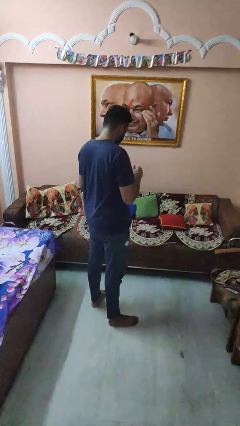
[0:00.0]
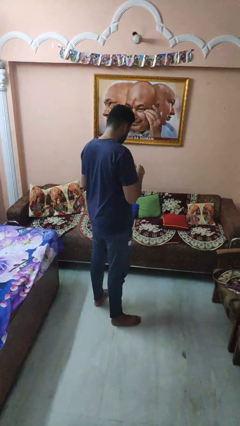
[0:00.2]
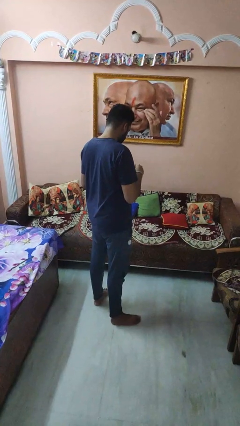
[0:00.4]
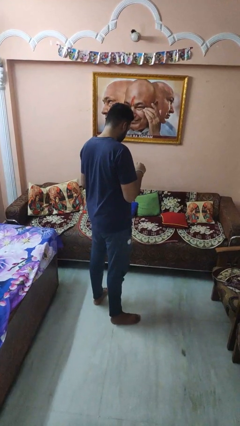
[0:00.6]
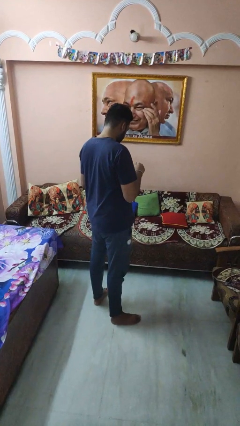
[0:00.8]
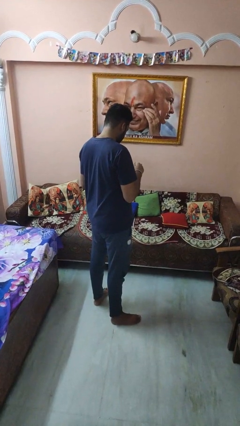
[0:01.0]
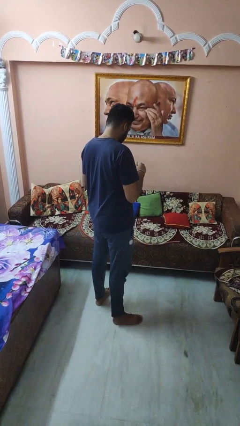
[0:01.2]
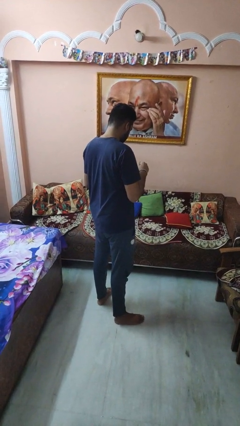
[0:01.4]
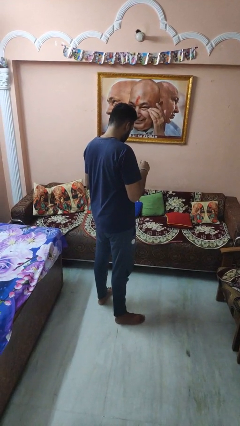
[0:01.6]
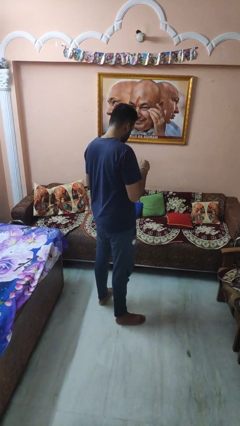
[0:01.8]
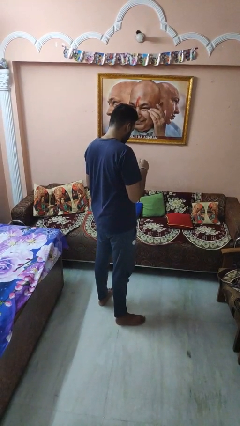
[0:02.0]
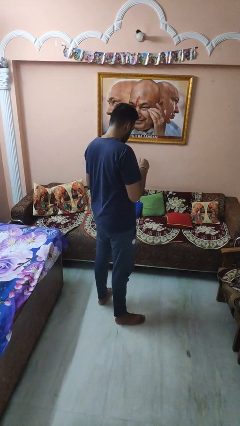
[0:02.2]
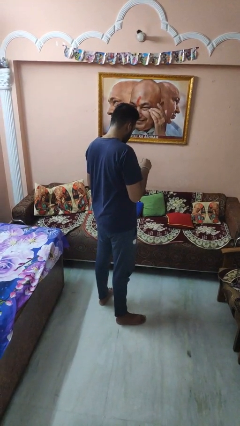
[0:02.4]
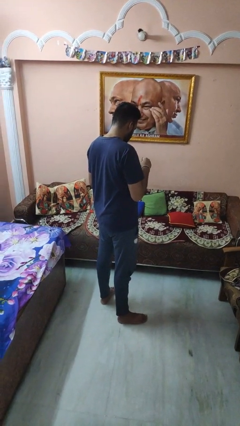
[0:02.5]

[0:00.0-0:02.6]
person stirs mug

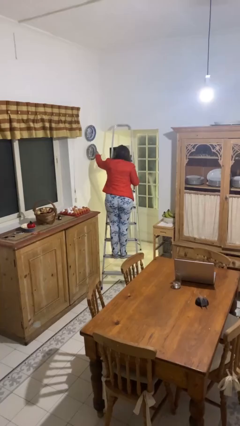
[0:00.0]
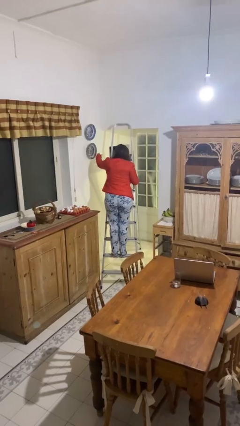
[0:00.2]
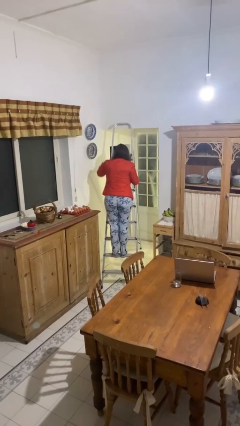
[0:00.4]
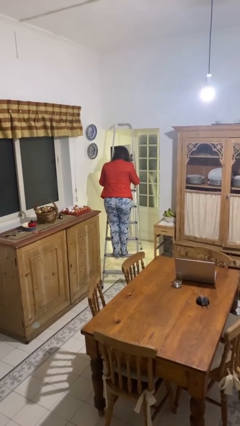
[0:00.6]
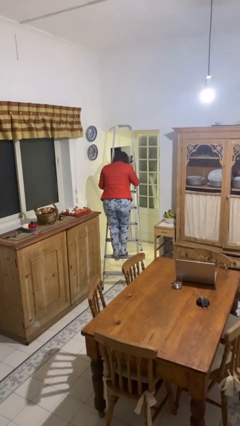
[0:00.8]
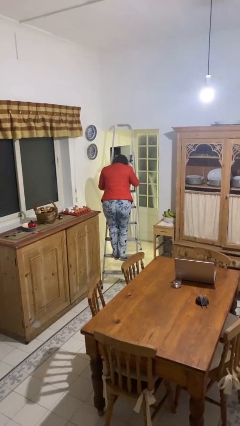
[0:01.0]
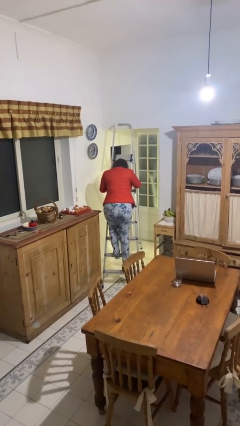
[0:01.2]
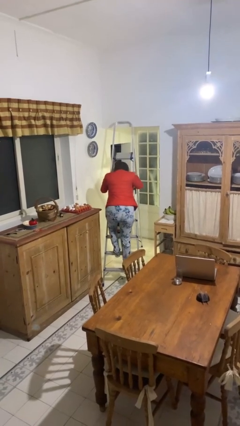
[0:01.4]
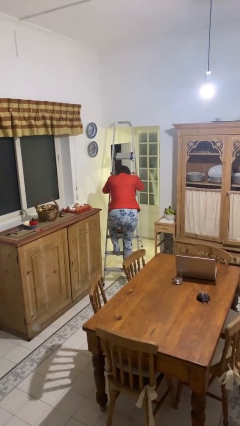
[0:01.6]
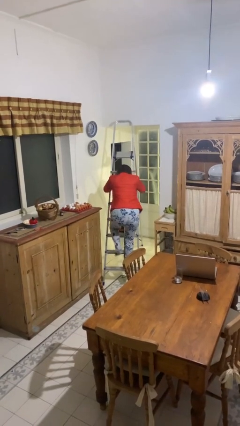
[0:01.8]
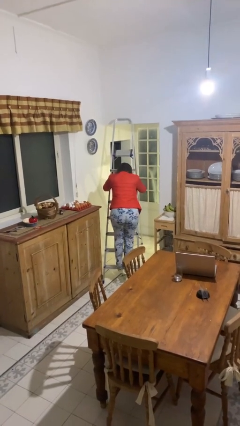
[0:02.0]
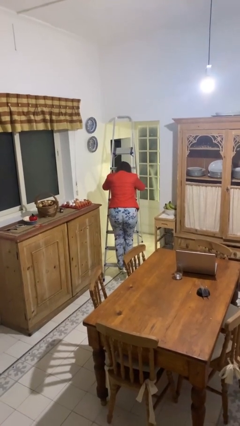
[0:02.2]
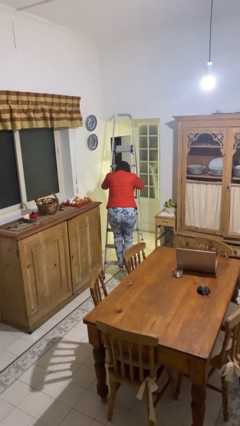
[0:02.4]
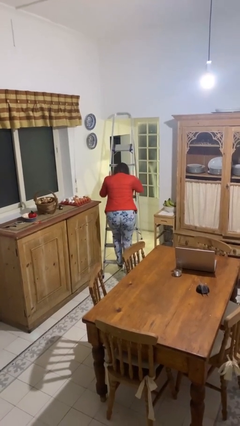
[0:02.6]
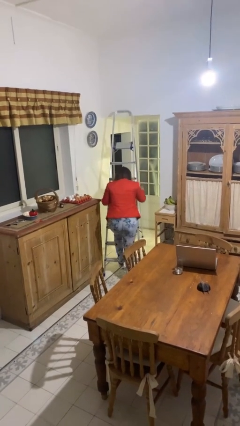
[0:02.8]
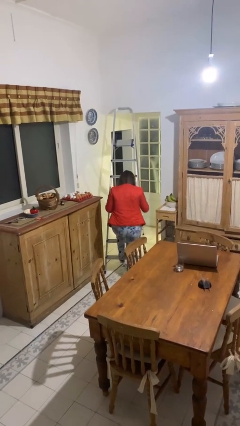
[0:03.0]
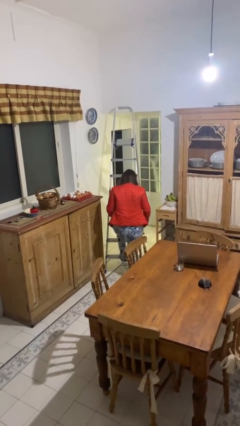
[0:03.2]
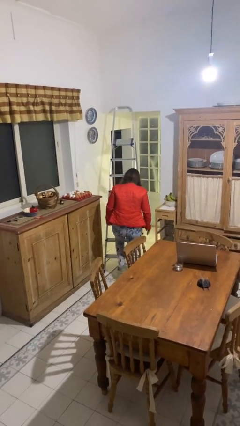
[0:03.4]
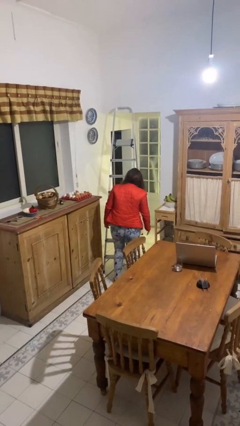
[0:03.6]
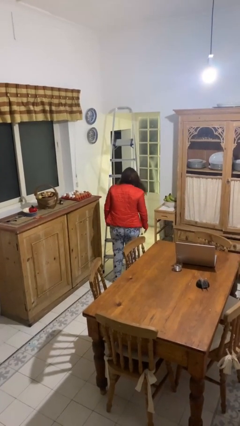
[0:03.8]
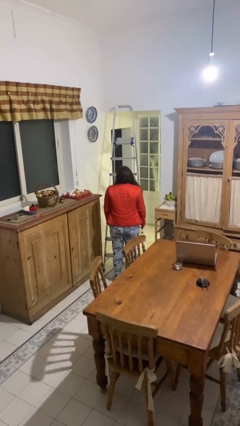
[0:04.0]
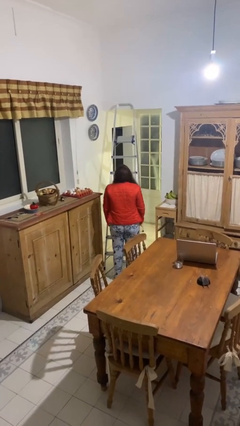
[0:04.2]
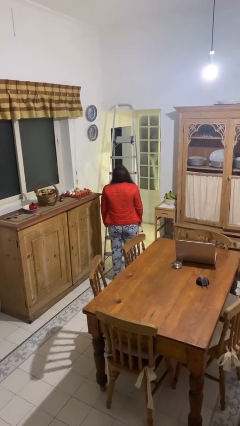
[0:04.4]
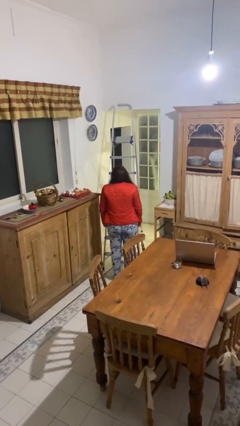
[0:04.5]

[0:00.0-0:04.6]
person climbs down ladder

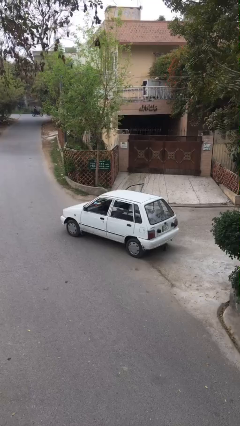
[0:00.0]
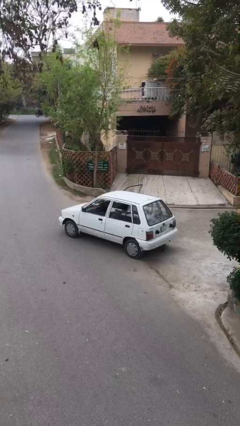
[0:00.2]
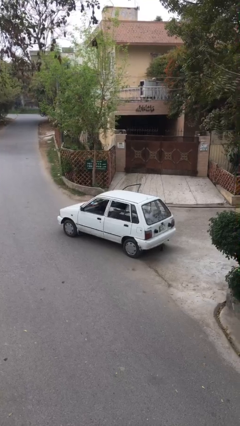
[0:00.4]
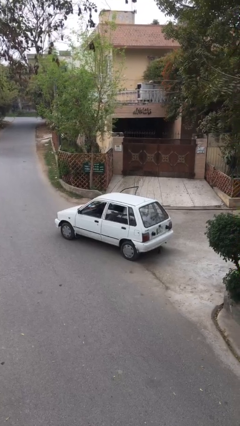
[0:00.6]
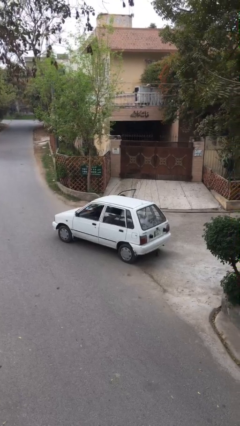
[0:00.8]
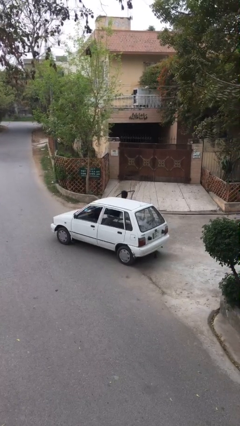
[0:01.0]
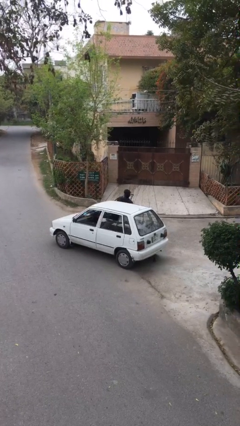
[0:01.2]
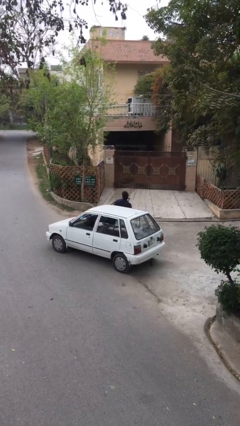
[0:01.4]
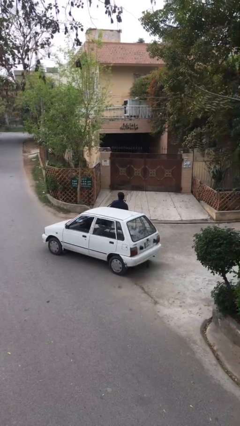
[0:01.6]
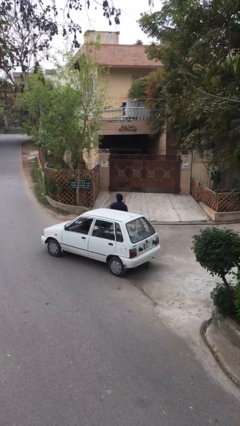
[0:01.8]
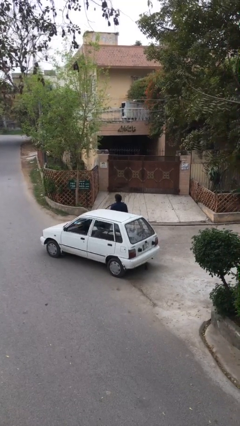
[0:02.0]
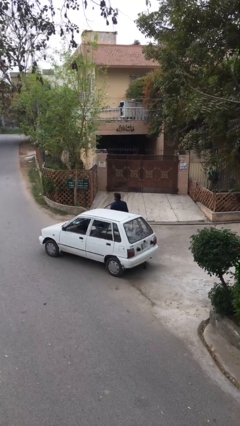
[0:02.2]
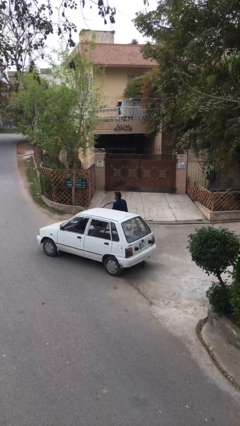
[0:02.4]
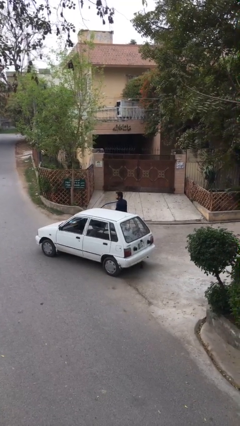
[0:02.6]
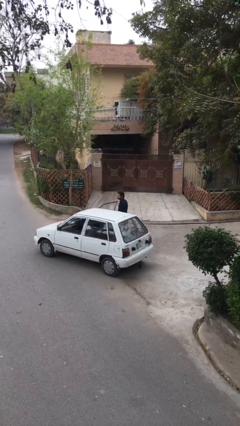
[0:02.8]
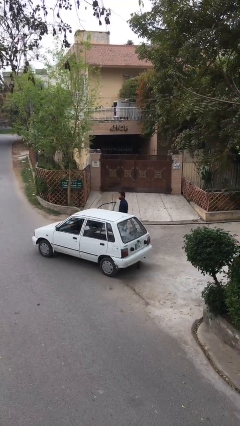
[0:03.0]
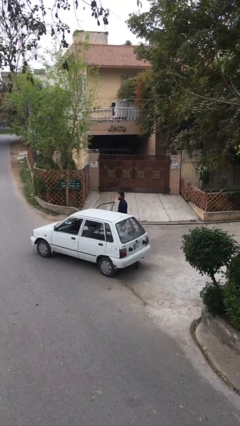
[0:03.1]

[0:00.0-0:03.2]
person exits car

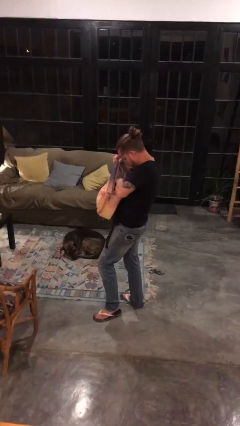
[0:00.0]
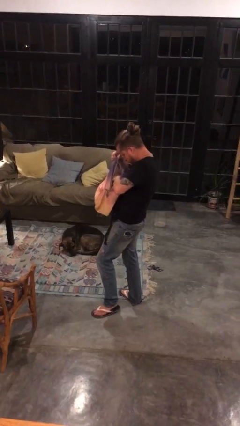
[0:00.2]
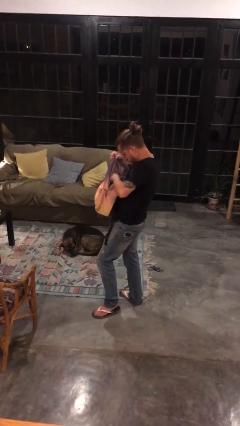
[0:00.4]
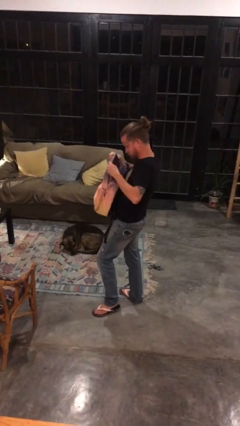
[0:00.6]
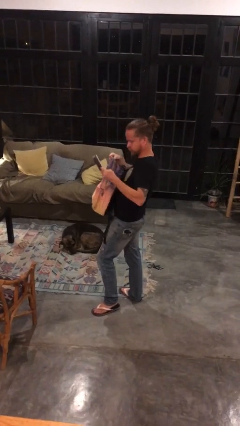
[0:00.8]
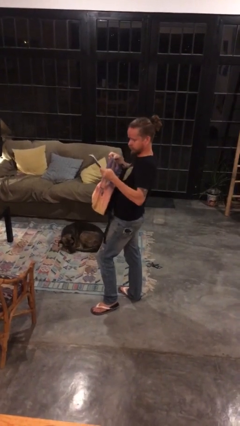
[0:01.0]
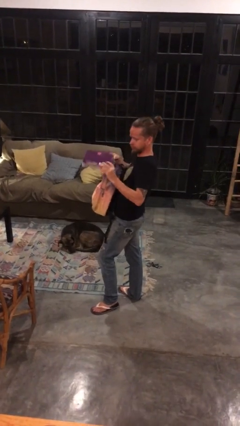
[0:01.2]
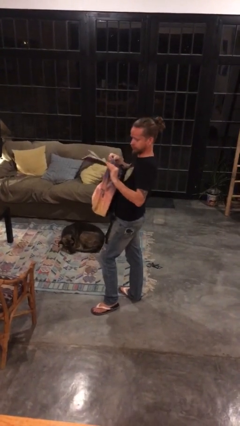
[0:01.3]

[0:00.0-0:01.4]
person takes object from backpack

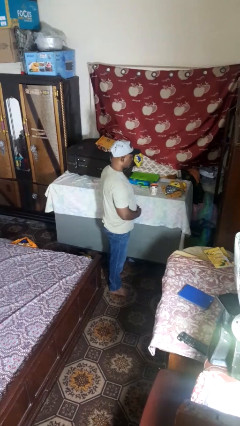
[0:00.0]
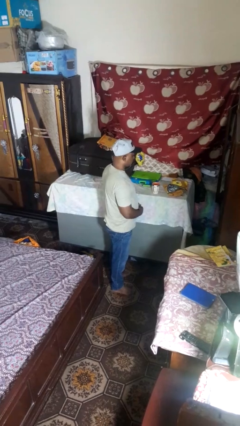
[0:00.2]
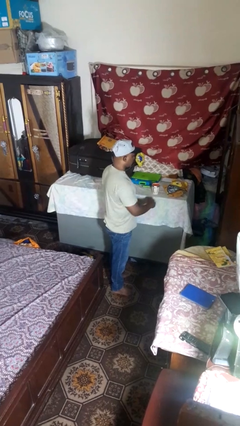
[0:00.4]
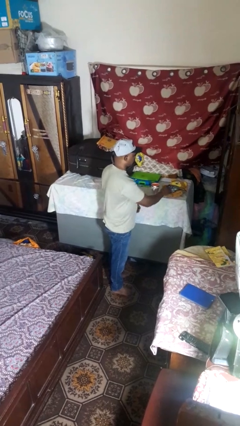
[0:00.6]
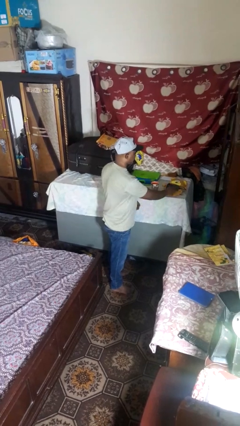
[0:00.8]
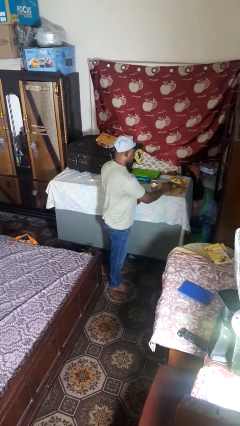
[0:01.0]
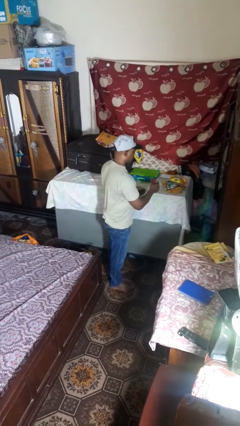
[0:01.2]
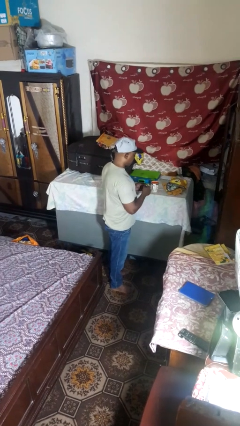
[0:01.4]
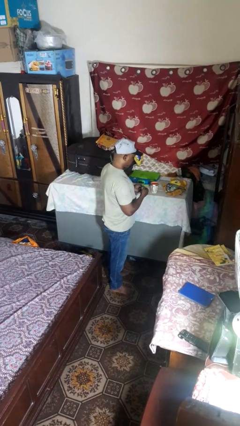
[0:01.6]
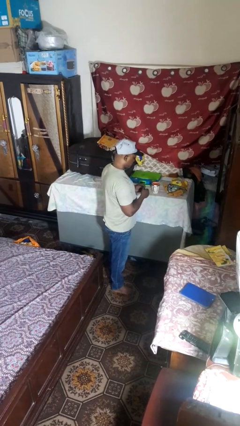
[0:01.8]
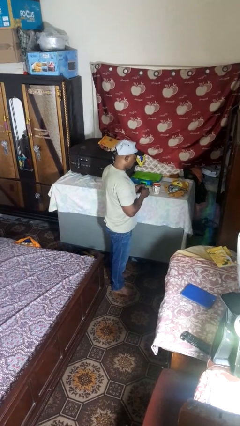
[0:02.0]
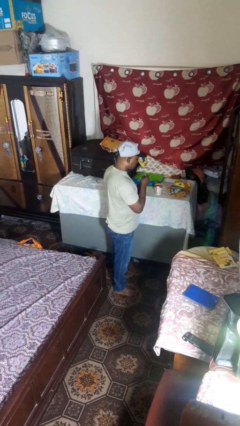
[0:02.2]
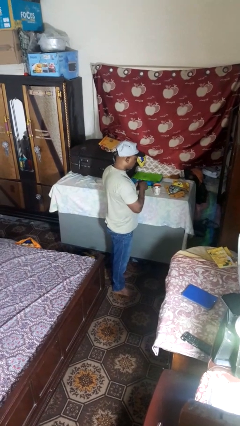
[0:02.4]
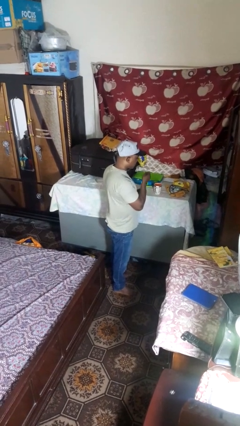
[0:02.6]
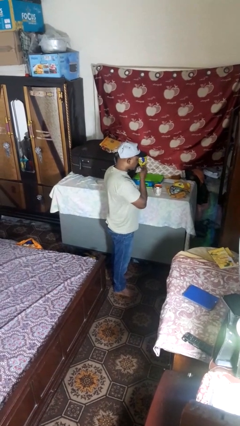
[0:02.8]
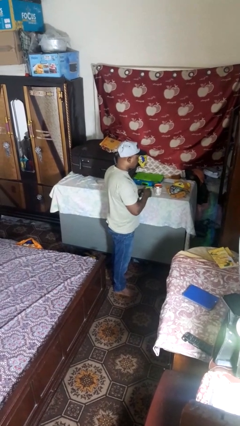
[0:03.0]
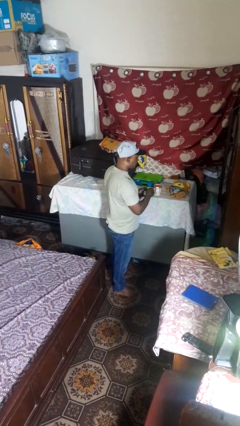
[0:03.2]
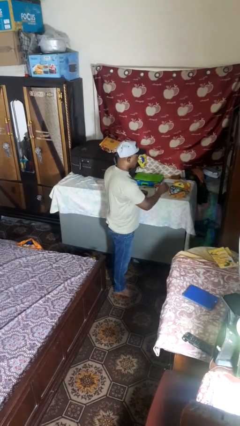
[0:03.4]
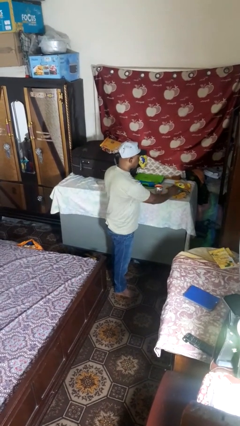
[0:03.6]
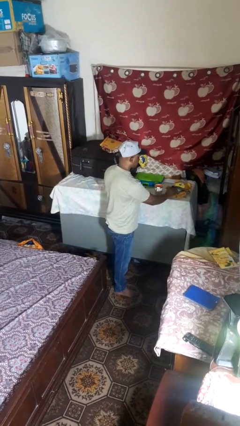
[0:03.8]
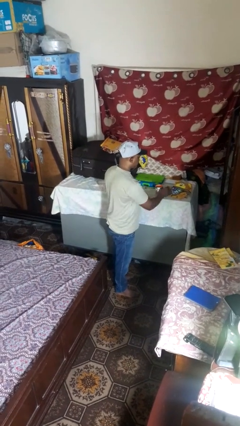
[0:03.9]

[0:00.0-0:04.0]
person takes medicine pills

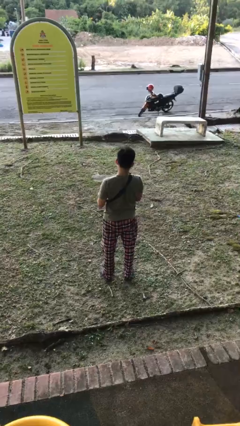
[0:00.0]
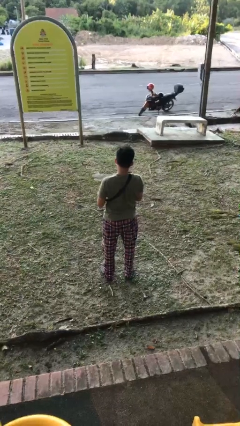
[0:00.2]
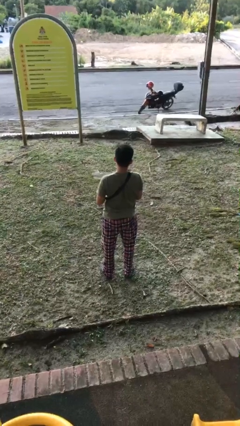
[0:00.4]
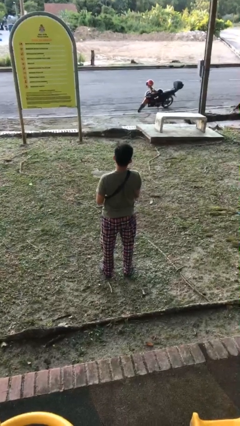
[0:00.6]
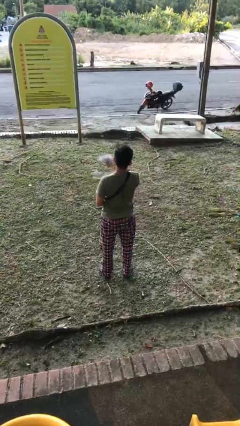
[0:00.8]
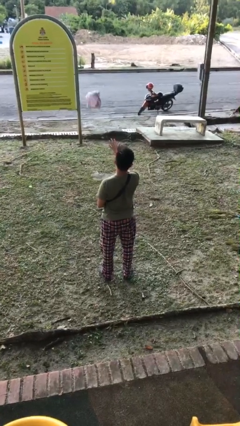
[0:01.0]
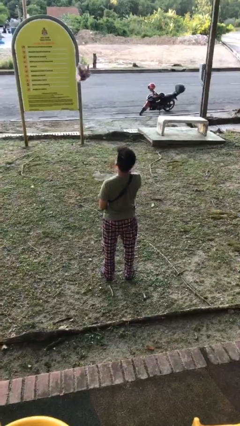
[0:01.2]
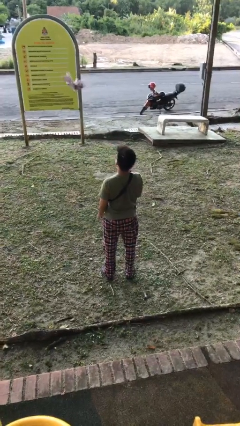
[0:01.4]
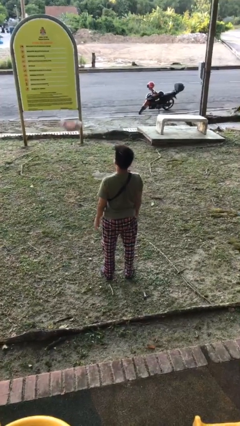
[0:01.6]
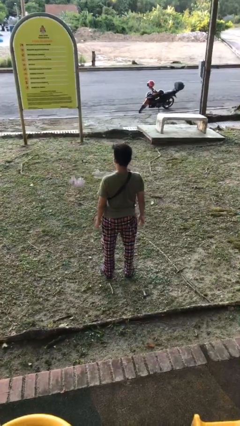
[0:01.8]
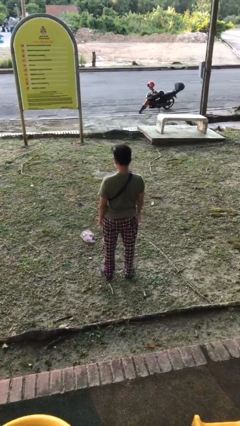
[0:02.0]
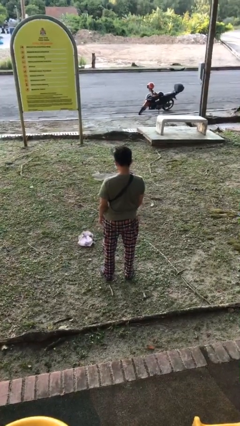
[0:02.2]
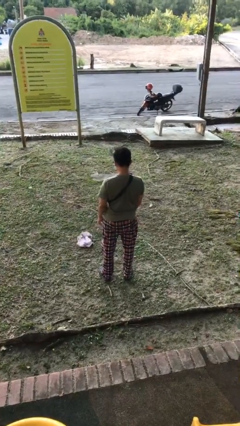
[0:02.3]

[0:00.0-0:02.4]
person throws object into air
